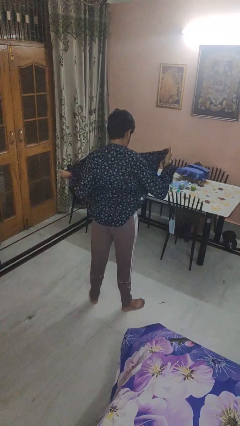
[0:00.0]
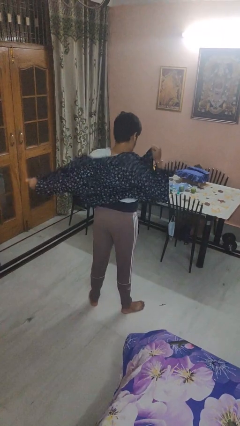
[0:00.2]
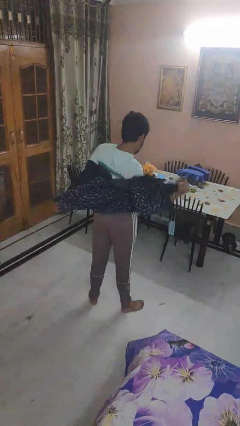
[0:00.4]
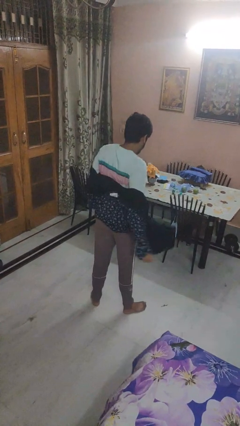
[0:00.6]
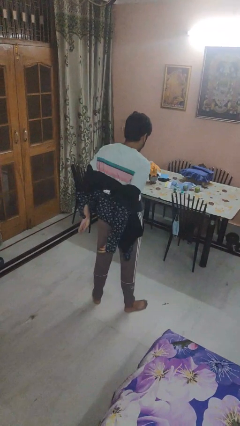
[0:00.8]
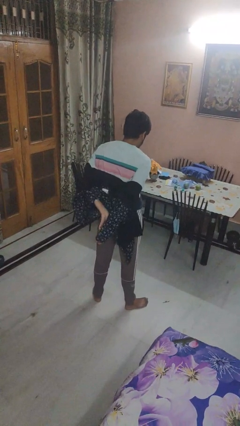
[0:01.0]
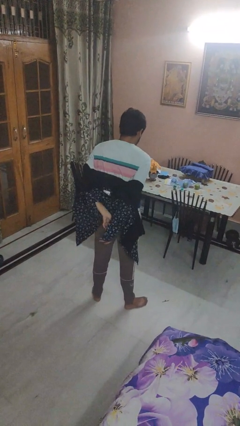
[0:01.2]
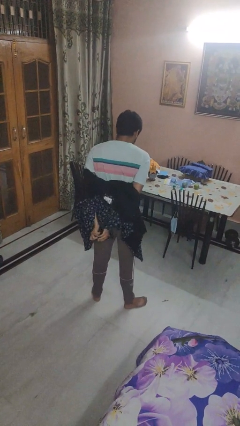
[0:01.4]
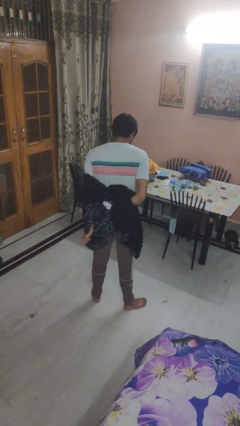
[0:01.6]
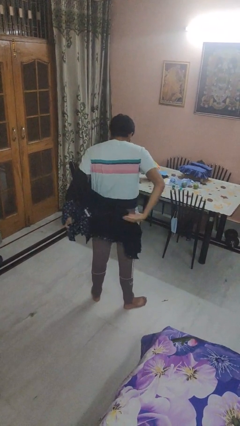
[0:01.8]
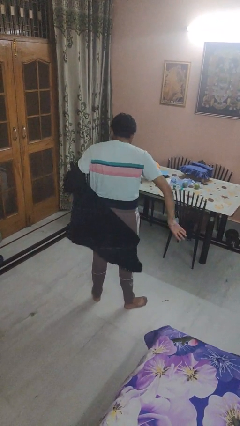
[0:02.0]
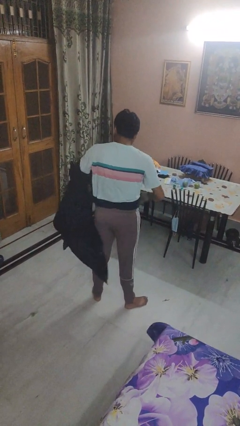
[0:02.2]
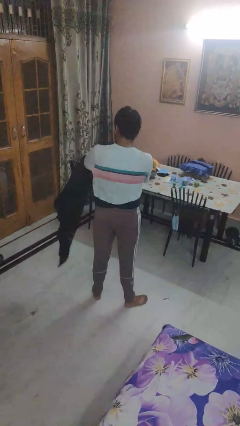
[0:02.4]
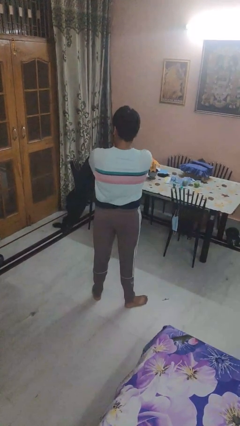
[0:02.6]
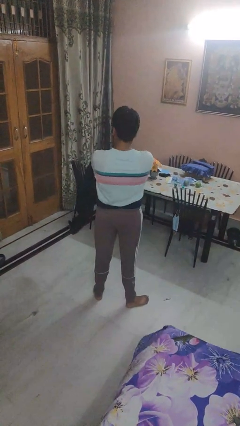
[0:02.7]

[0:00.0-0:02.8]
person takes off shirt

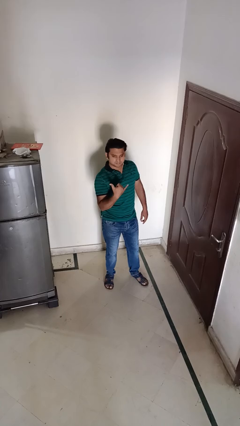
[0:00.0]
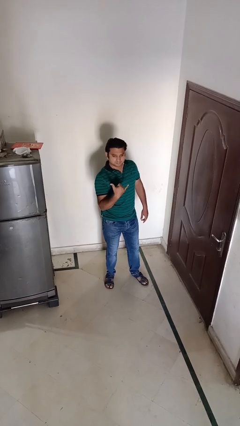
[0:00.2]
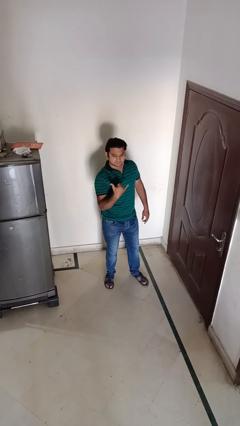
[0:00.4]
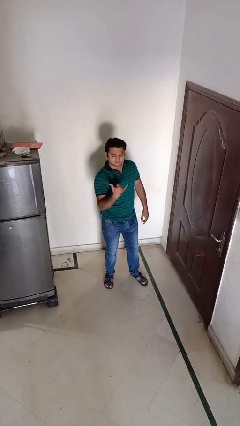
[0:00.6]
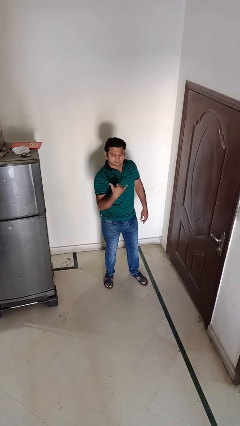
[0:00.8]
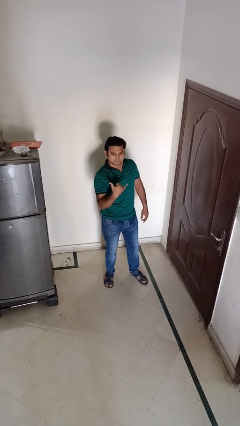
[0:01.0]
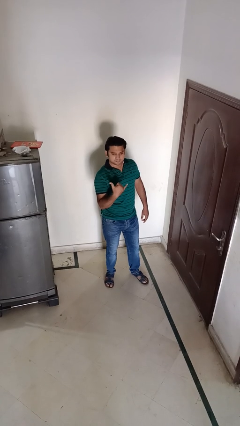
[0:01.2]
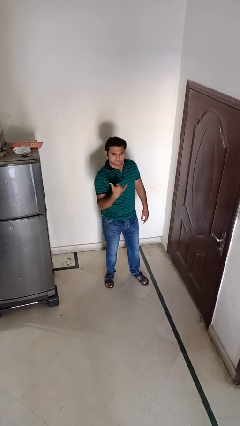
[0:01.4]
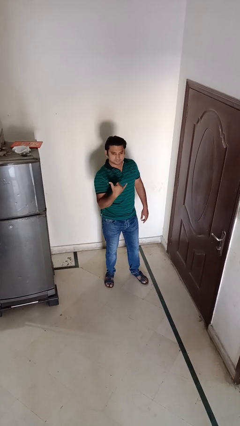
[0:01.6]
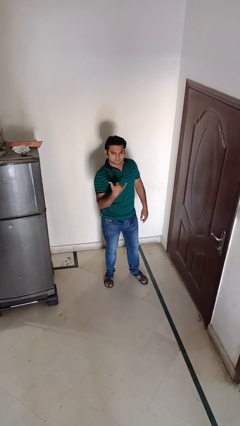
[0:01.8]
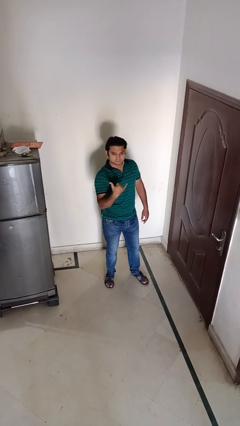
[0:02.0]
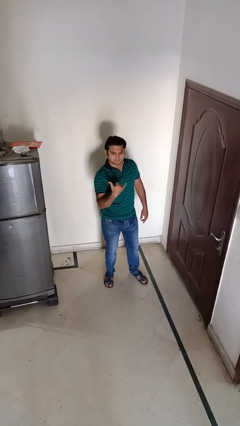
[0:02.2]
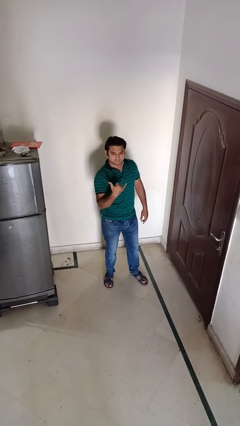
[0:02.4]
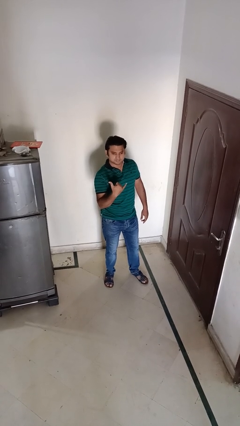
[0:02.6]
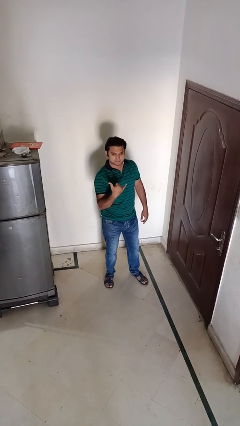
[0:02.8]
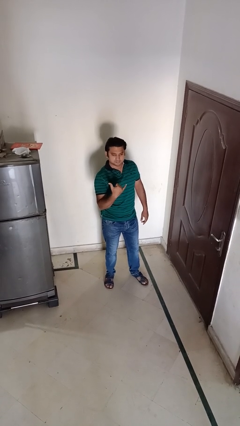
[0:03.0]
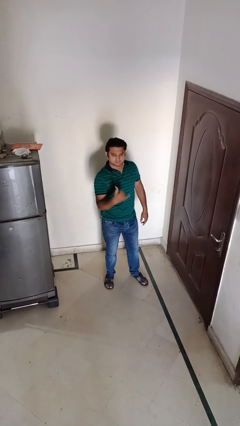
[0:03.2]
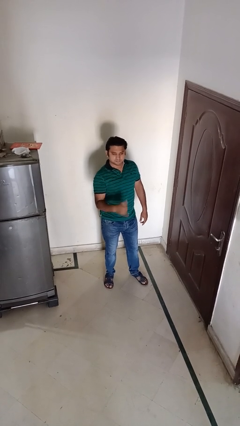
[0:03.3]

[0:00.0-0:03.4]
person gestures hang loose

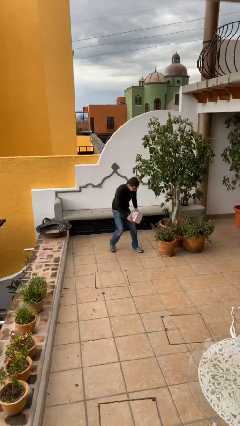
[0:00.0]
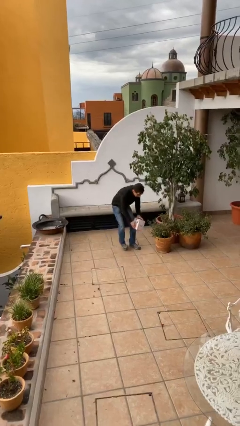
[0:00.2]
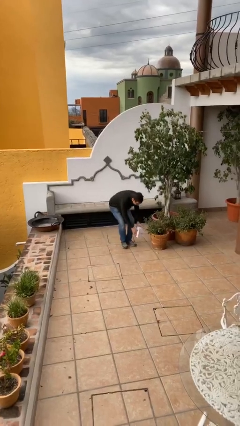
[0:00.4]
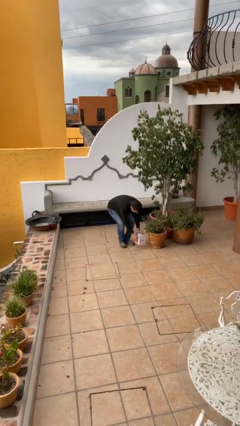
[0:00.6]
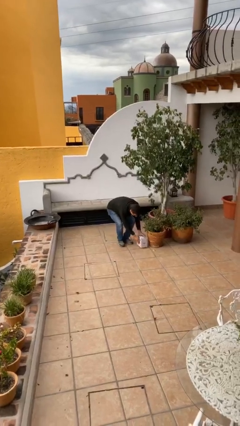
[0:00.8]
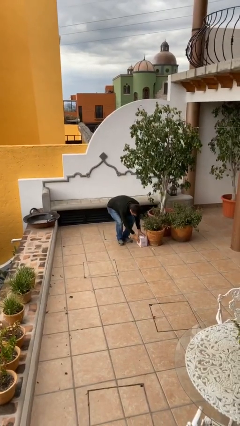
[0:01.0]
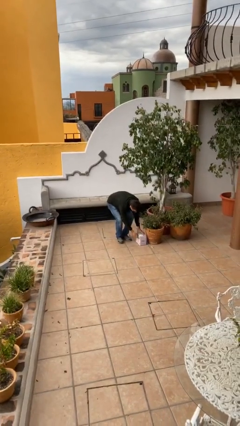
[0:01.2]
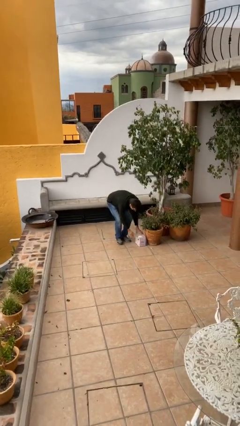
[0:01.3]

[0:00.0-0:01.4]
person puts down object on floor

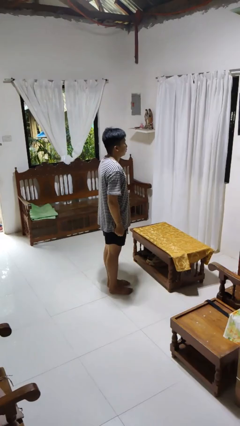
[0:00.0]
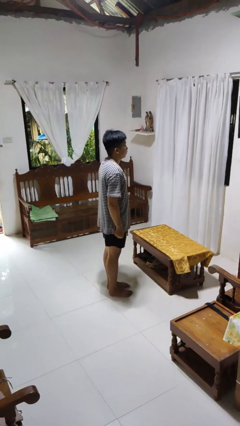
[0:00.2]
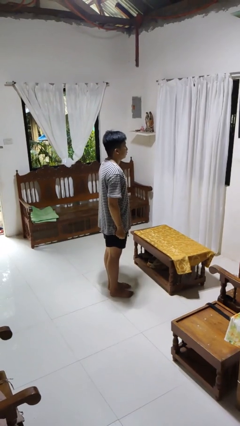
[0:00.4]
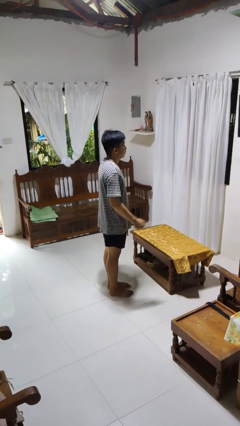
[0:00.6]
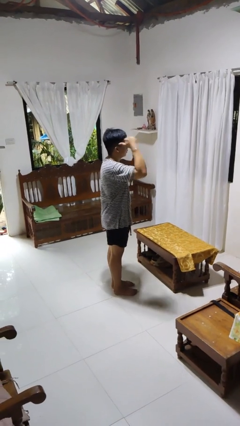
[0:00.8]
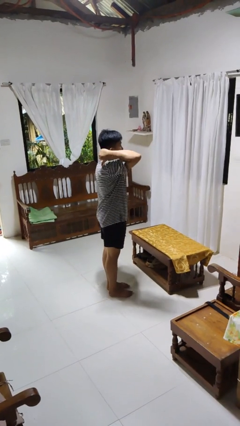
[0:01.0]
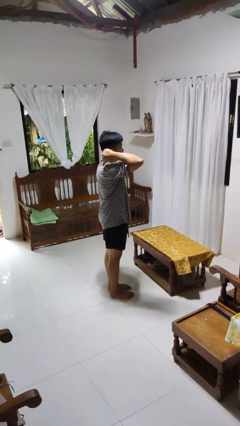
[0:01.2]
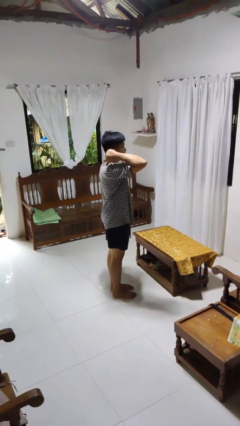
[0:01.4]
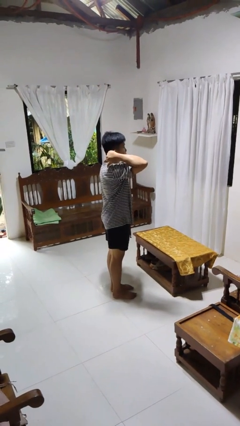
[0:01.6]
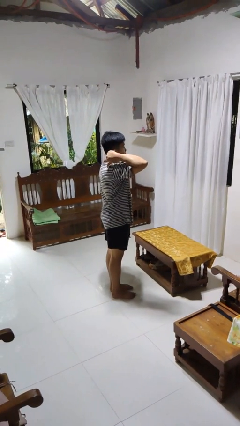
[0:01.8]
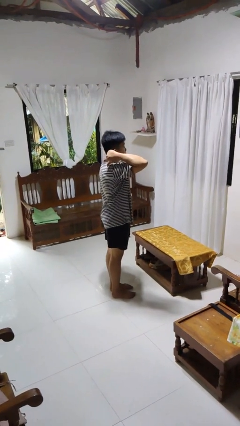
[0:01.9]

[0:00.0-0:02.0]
person gestures behind me

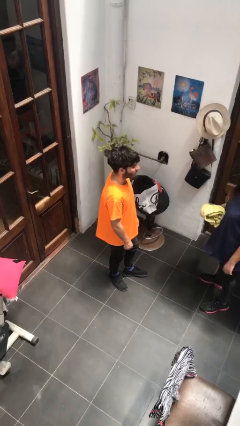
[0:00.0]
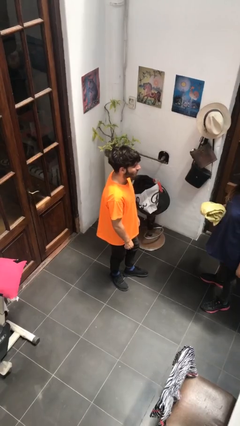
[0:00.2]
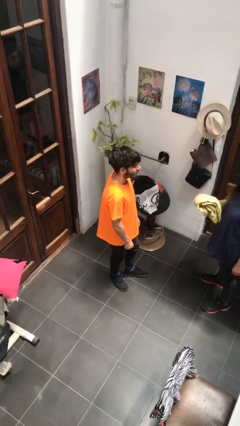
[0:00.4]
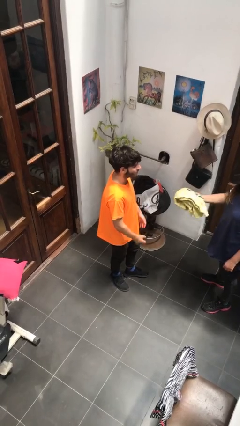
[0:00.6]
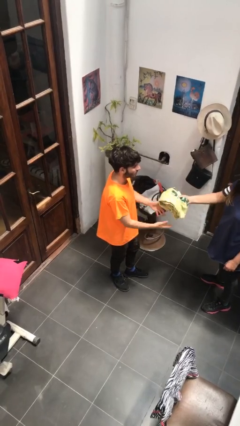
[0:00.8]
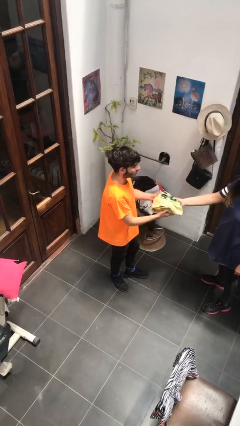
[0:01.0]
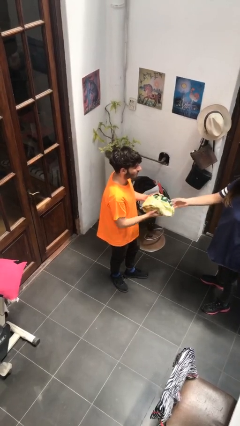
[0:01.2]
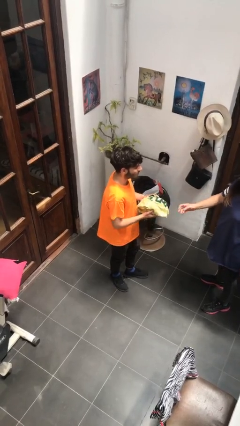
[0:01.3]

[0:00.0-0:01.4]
person transfers object to person

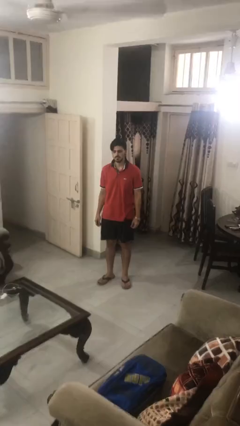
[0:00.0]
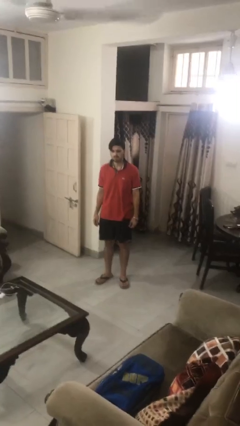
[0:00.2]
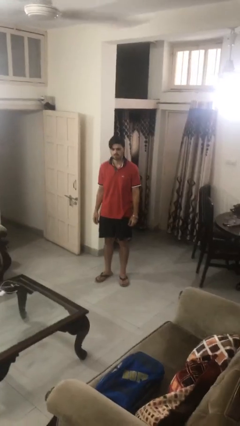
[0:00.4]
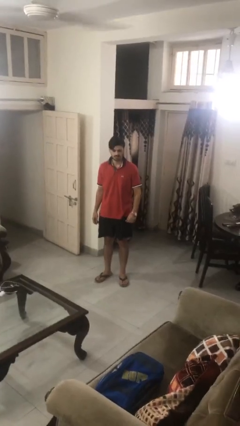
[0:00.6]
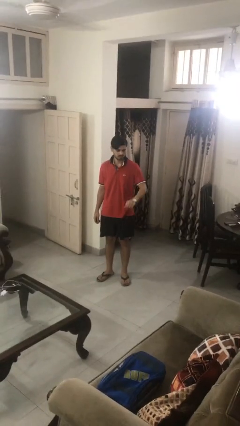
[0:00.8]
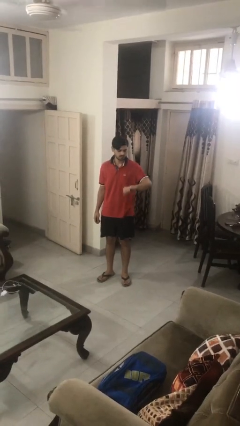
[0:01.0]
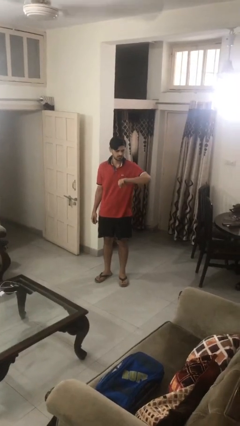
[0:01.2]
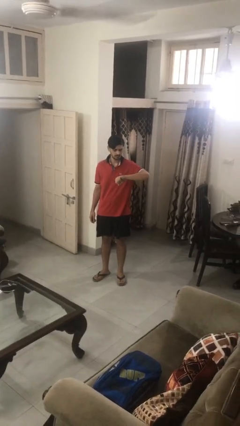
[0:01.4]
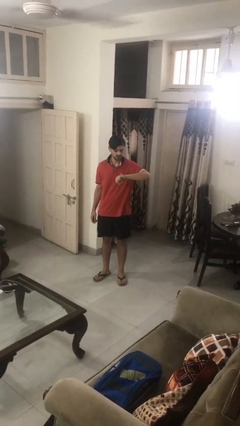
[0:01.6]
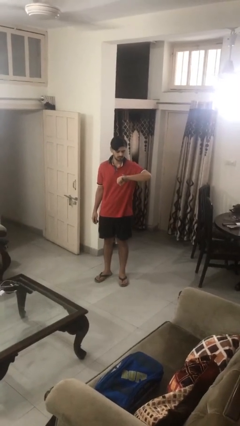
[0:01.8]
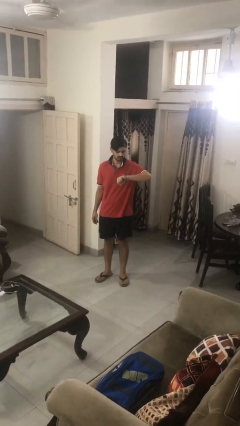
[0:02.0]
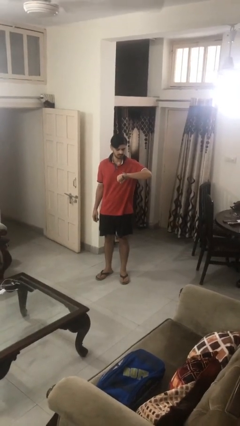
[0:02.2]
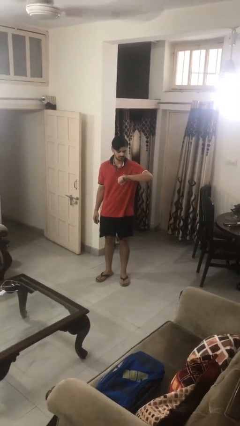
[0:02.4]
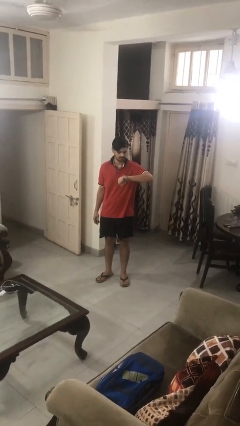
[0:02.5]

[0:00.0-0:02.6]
person looks at wristwatch

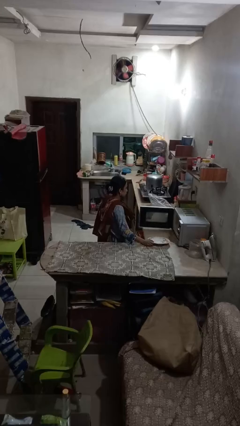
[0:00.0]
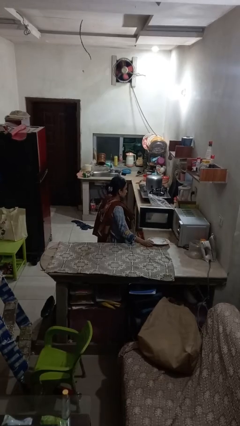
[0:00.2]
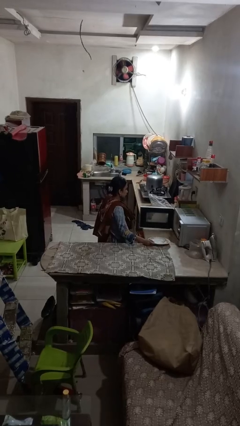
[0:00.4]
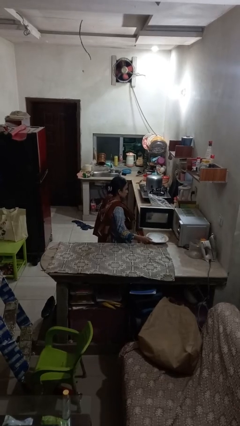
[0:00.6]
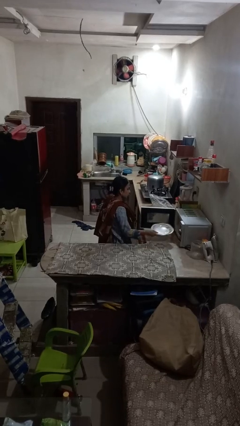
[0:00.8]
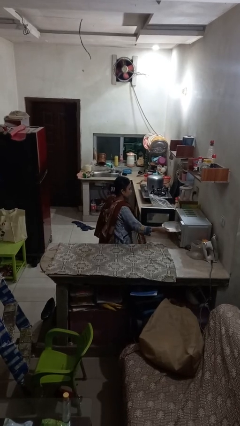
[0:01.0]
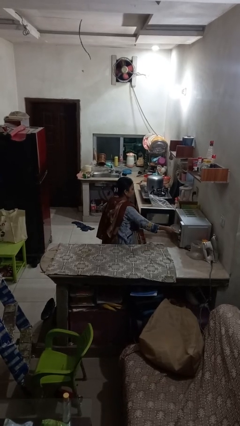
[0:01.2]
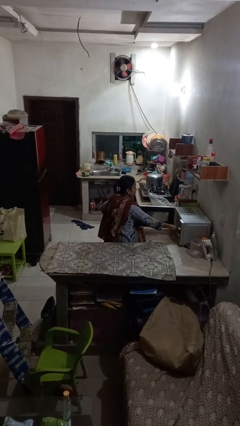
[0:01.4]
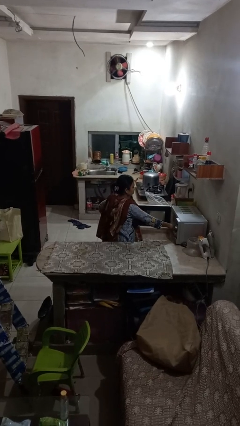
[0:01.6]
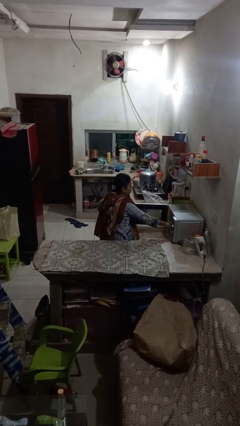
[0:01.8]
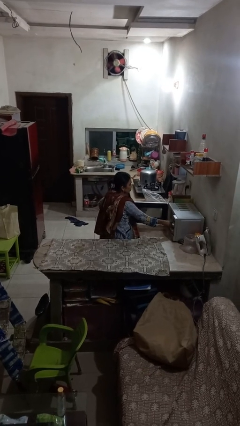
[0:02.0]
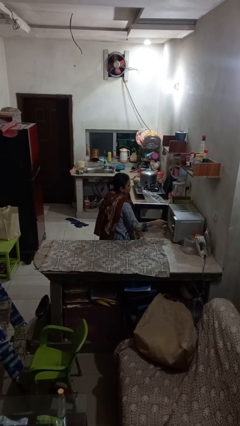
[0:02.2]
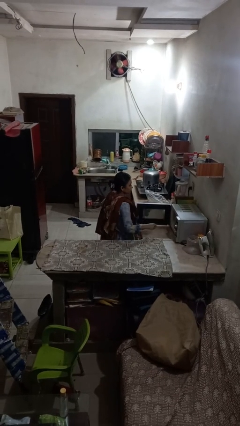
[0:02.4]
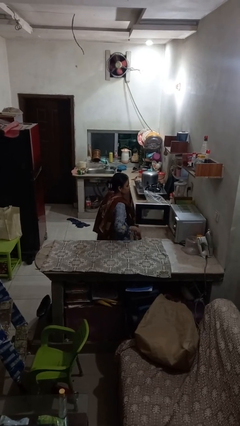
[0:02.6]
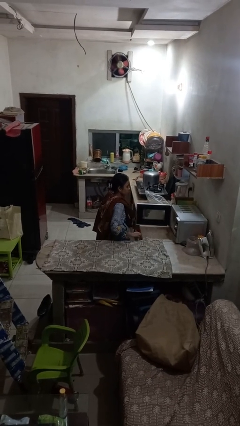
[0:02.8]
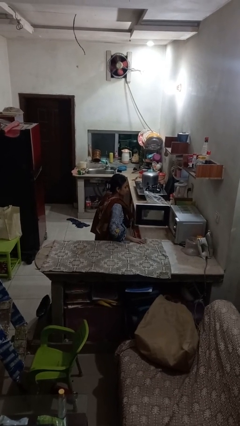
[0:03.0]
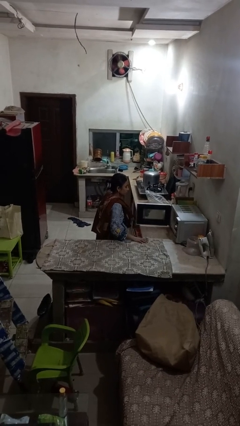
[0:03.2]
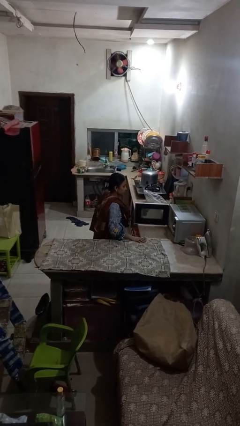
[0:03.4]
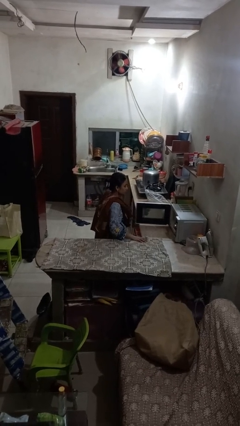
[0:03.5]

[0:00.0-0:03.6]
person puts object into microwave
